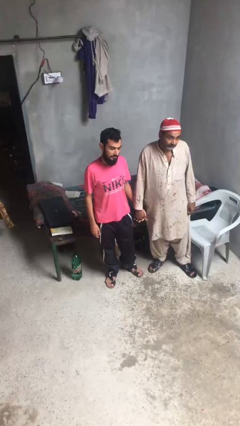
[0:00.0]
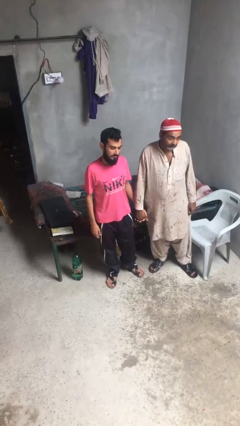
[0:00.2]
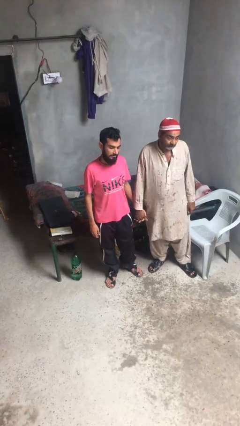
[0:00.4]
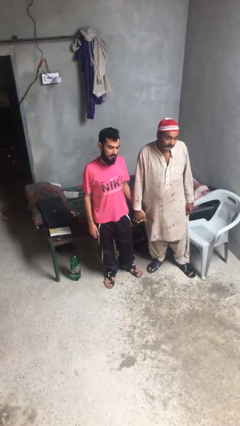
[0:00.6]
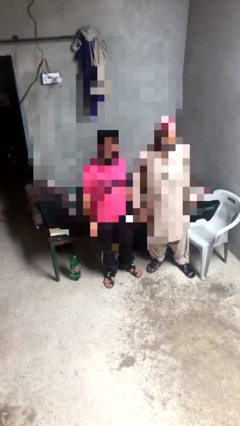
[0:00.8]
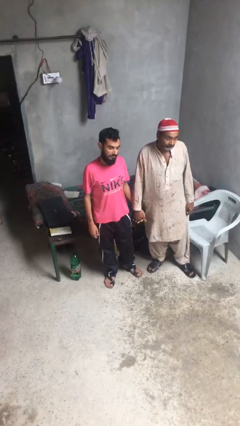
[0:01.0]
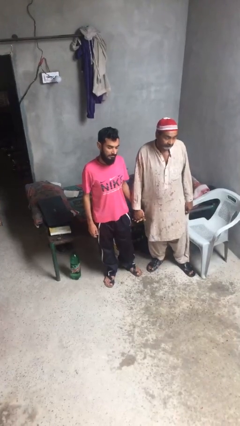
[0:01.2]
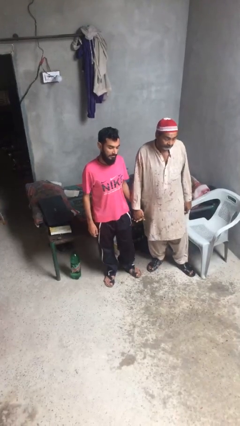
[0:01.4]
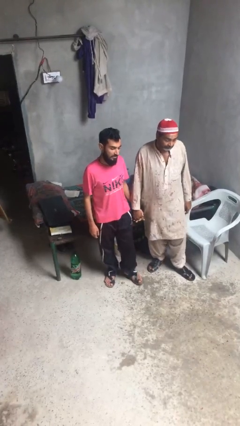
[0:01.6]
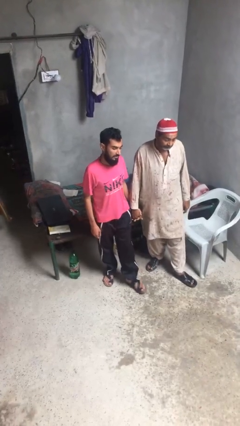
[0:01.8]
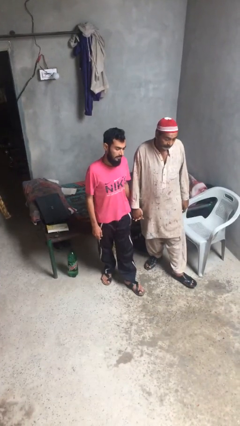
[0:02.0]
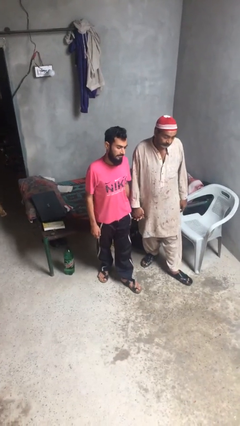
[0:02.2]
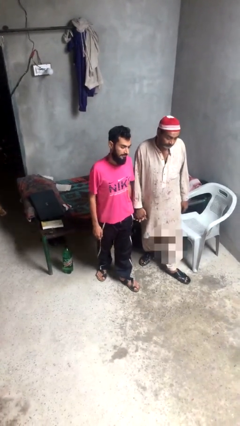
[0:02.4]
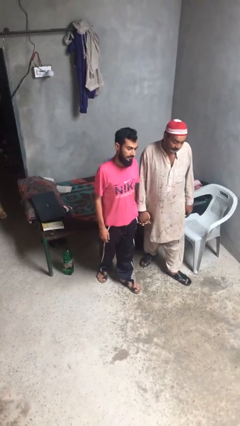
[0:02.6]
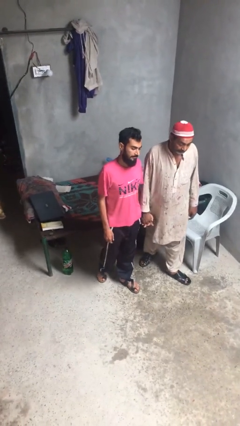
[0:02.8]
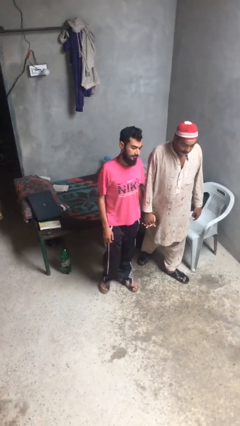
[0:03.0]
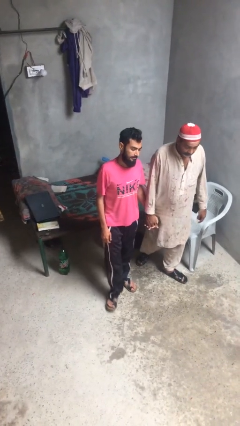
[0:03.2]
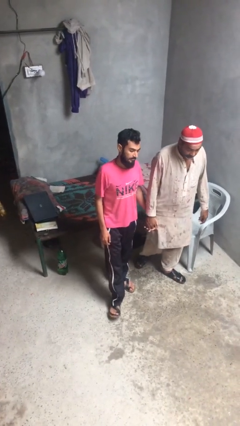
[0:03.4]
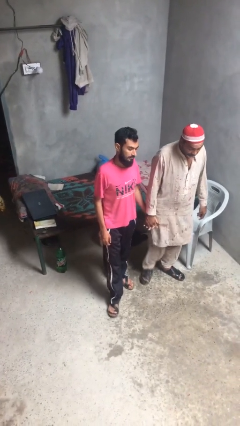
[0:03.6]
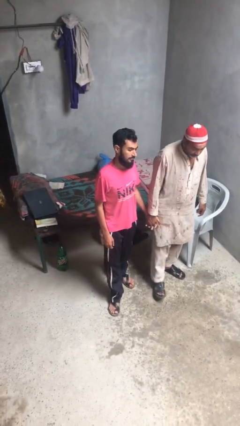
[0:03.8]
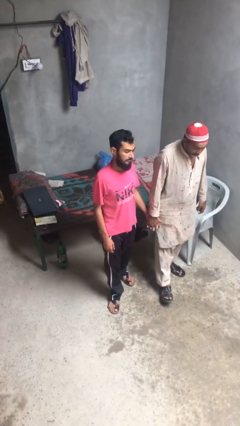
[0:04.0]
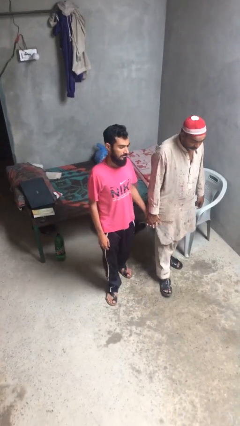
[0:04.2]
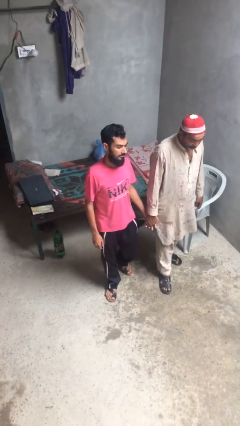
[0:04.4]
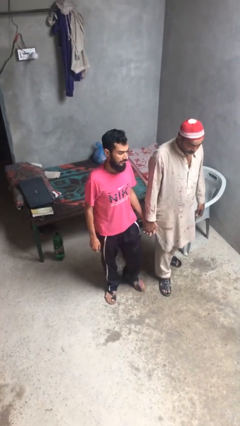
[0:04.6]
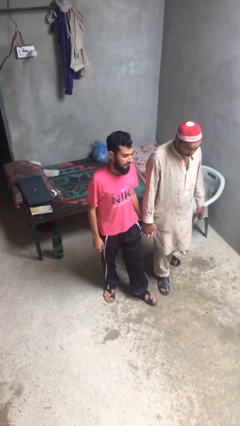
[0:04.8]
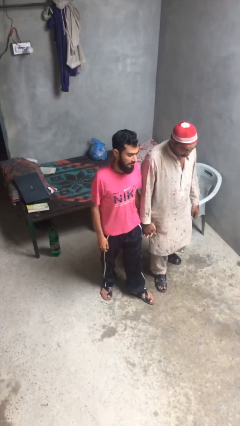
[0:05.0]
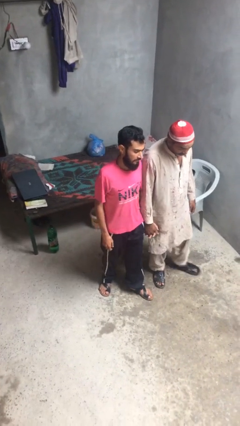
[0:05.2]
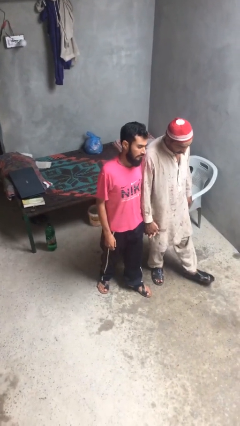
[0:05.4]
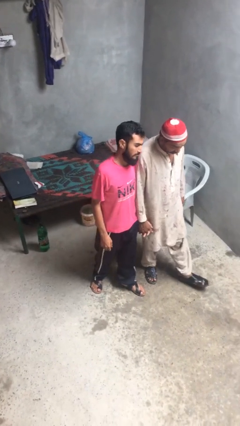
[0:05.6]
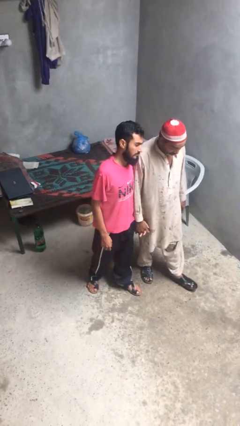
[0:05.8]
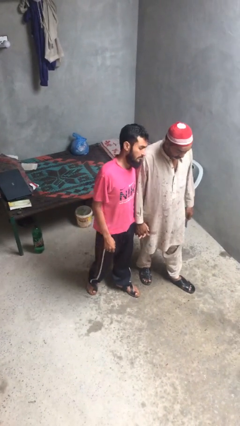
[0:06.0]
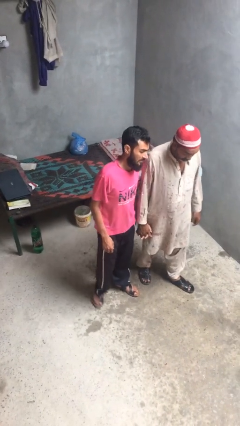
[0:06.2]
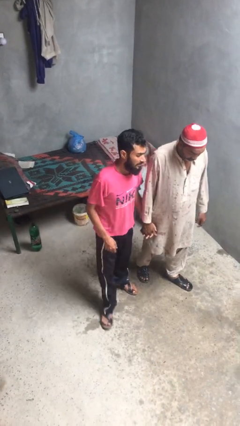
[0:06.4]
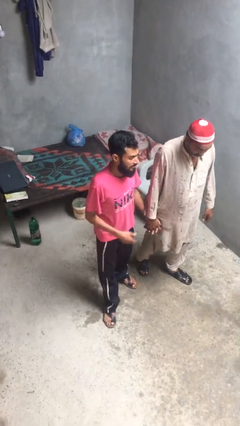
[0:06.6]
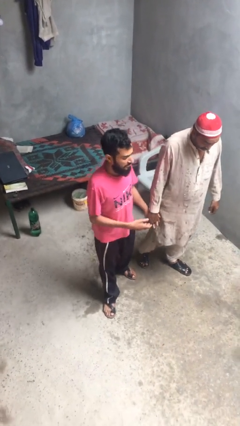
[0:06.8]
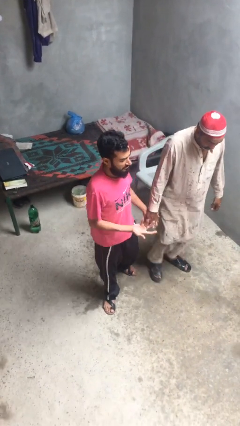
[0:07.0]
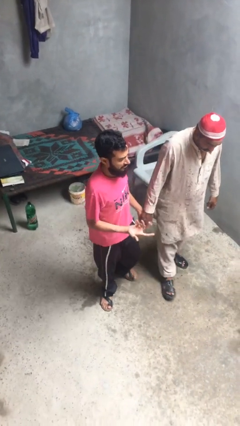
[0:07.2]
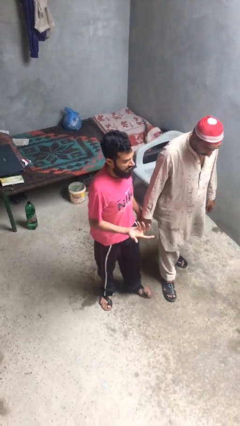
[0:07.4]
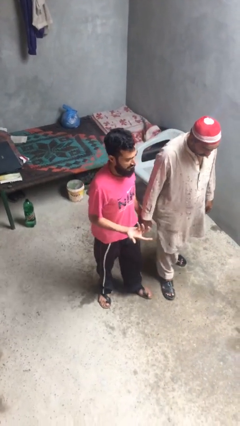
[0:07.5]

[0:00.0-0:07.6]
person holds hand

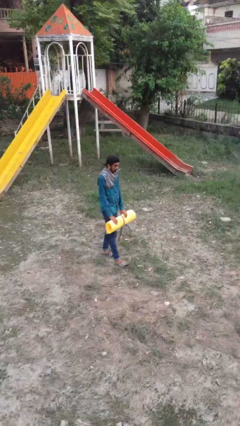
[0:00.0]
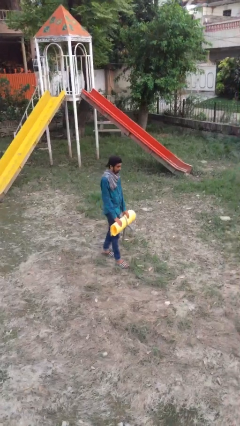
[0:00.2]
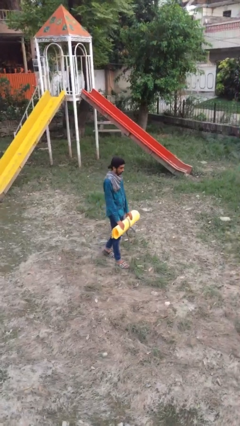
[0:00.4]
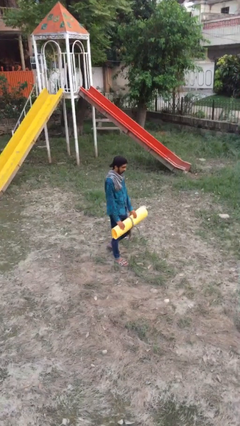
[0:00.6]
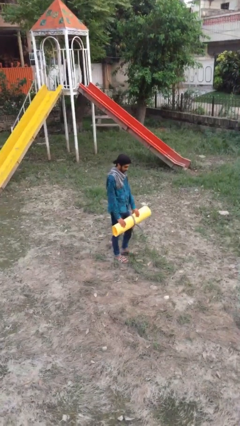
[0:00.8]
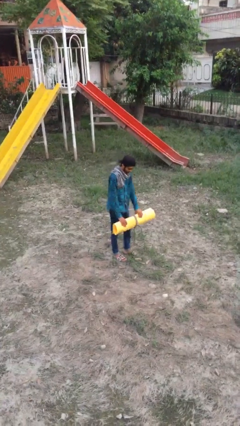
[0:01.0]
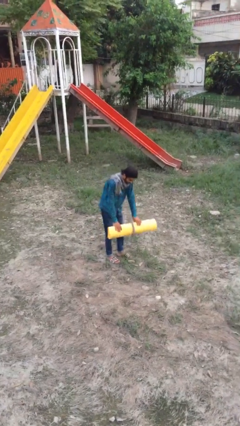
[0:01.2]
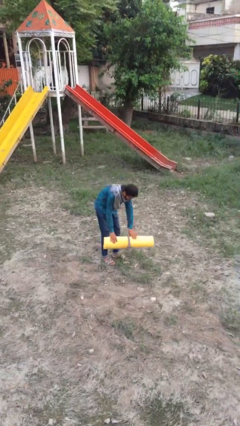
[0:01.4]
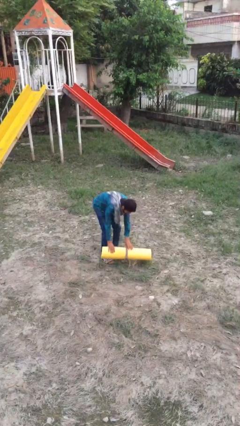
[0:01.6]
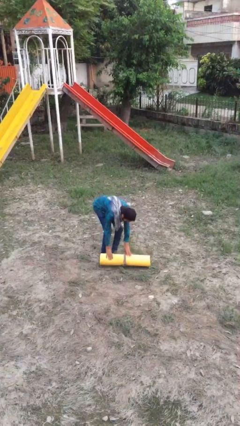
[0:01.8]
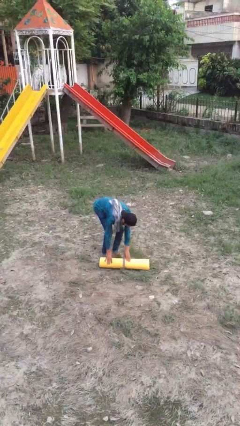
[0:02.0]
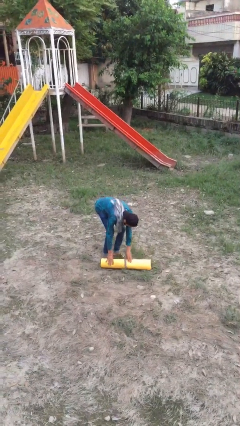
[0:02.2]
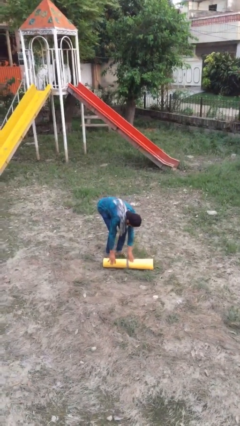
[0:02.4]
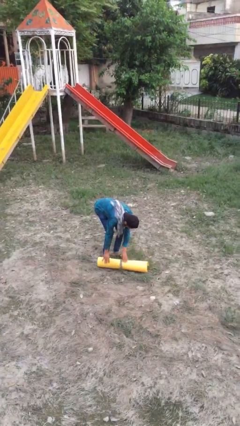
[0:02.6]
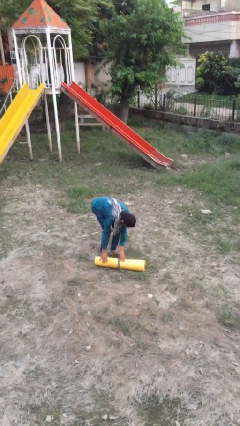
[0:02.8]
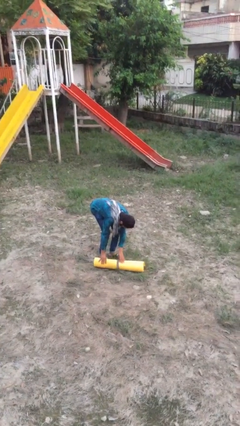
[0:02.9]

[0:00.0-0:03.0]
person puts down object on floor

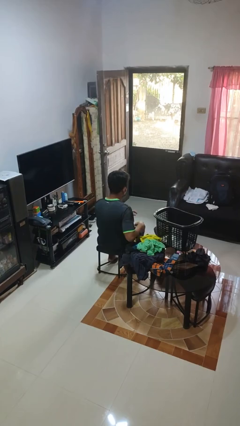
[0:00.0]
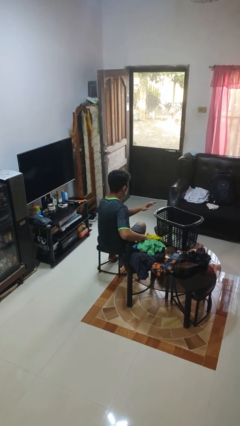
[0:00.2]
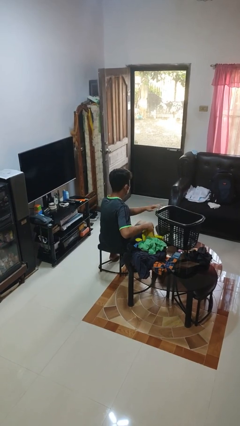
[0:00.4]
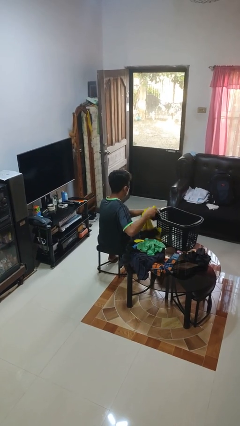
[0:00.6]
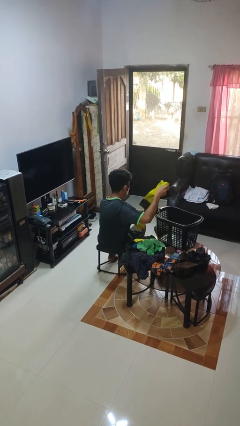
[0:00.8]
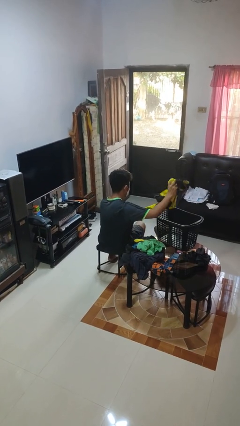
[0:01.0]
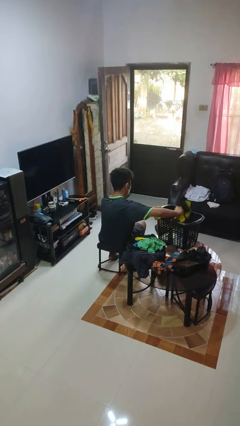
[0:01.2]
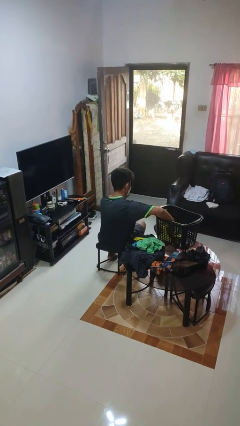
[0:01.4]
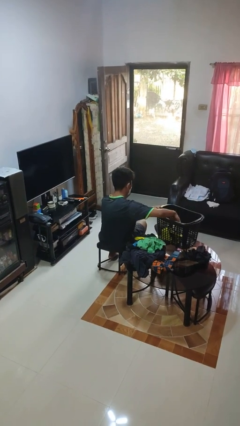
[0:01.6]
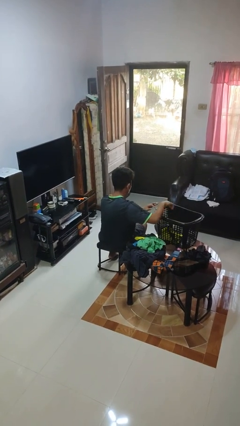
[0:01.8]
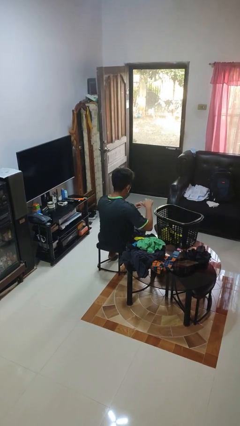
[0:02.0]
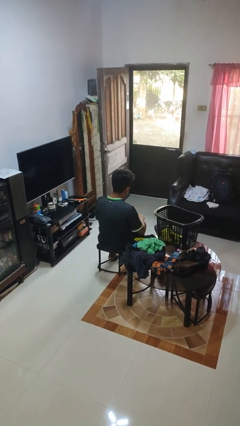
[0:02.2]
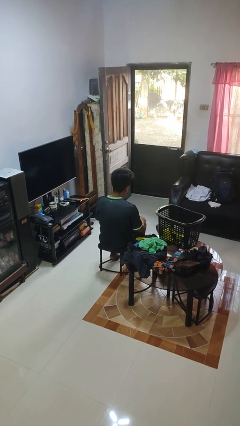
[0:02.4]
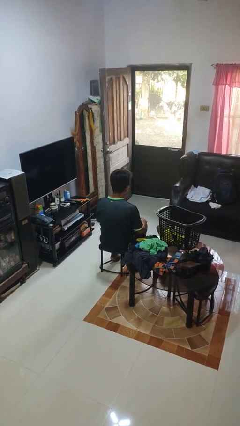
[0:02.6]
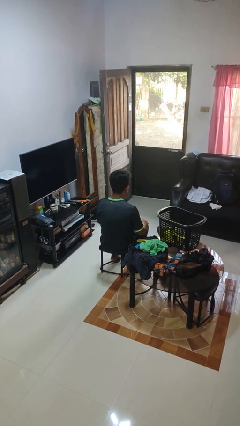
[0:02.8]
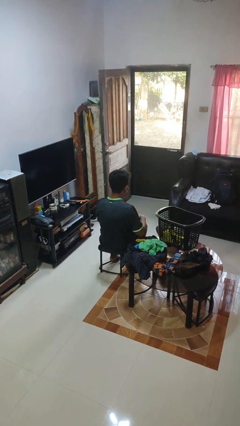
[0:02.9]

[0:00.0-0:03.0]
person puts object into basket

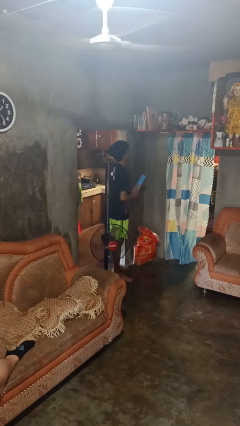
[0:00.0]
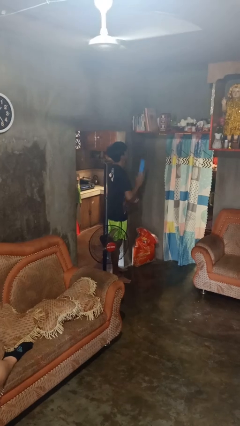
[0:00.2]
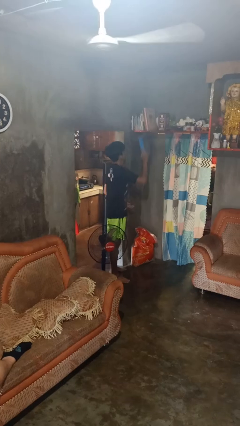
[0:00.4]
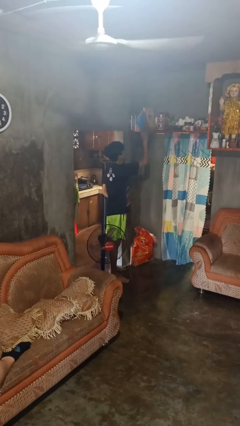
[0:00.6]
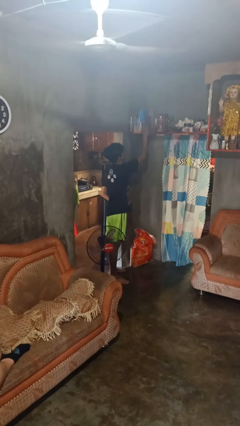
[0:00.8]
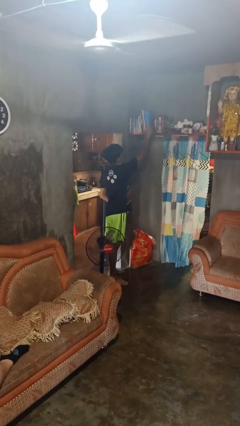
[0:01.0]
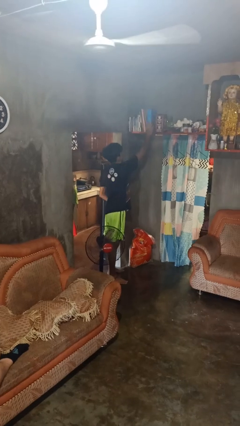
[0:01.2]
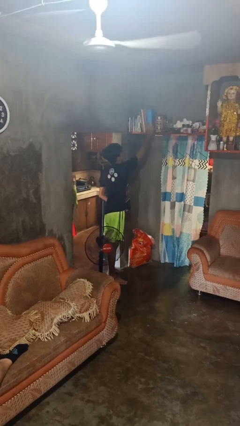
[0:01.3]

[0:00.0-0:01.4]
person puts down object on shelf

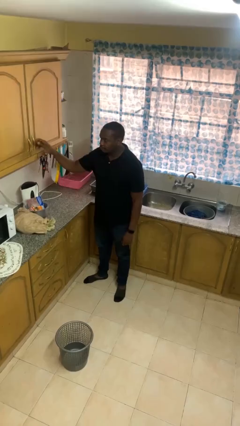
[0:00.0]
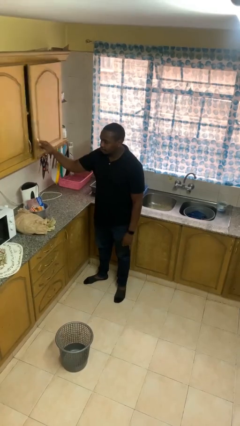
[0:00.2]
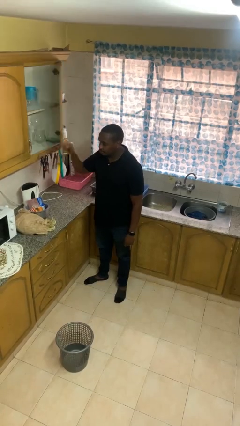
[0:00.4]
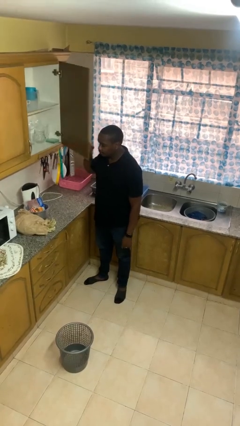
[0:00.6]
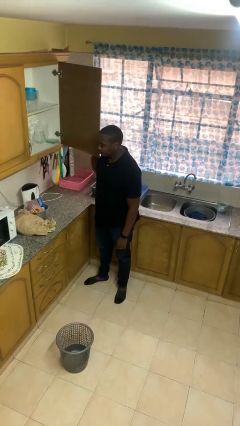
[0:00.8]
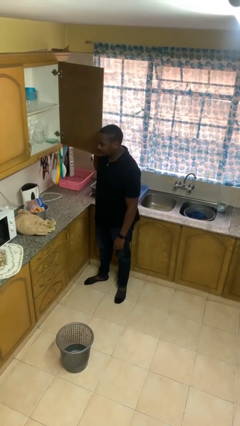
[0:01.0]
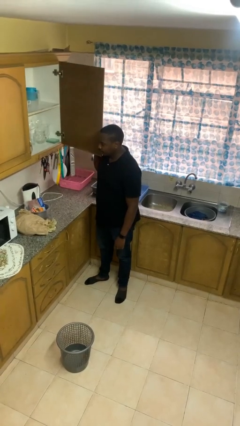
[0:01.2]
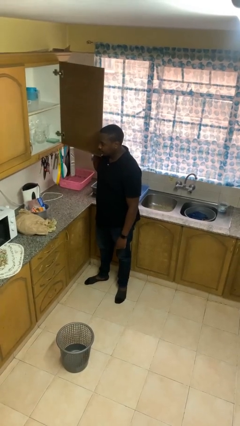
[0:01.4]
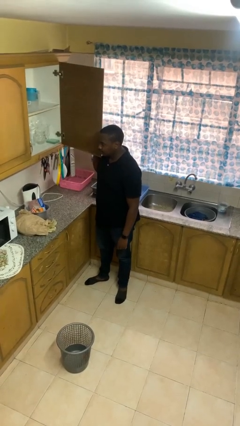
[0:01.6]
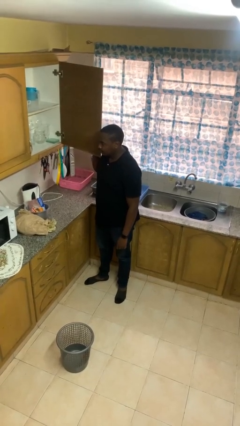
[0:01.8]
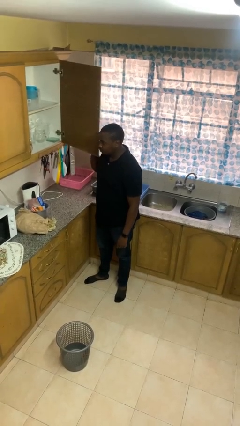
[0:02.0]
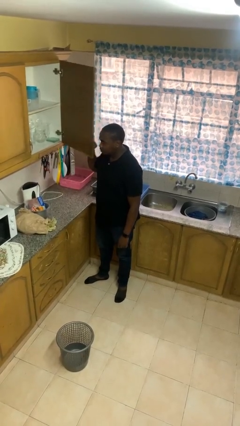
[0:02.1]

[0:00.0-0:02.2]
person opens cabinet

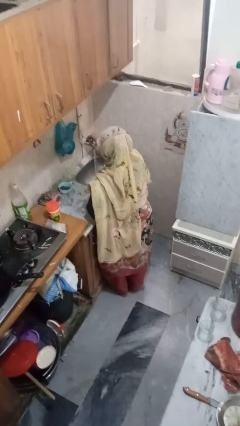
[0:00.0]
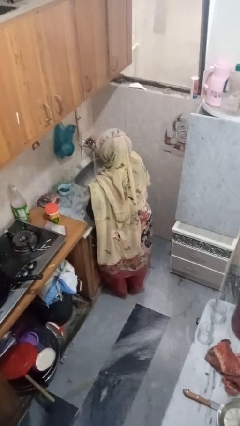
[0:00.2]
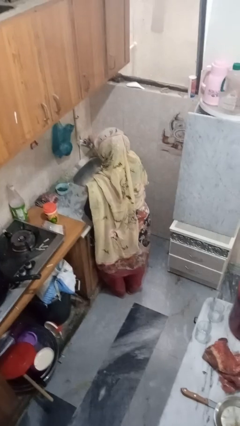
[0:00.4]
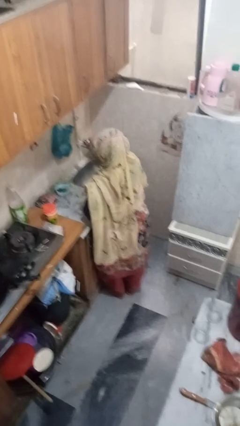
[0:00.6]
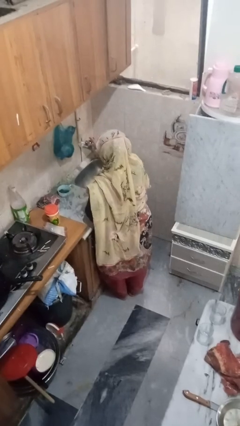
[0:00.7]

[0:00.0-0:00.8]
person turns off faucet
